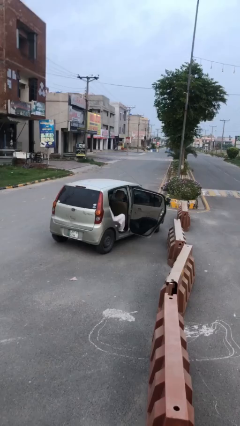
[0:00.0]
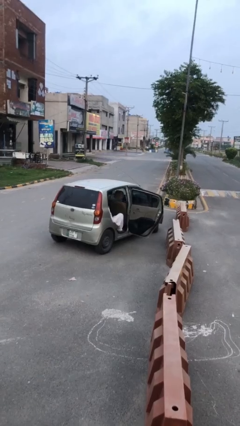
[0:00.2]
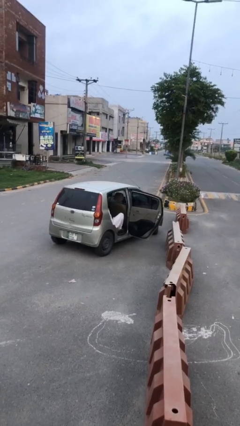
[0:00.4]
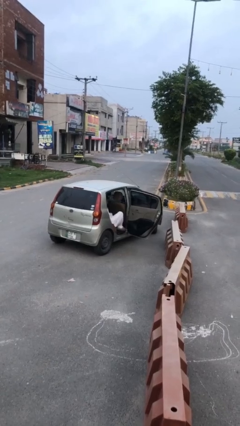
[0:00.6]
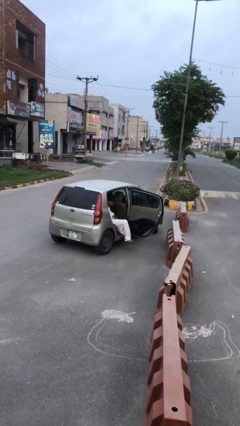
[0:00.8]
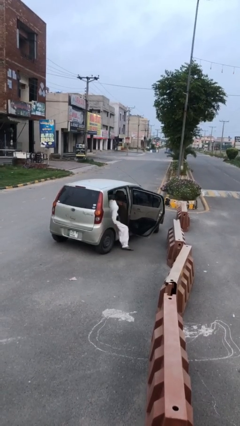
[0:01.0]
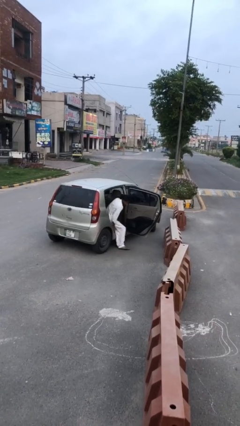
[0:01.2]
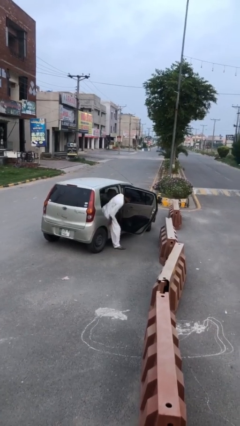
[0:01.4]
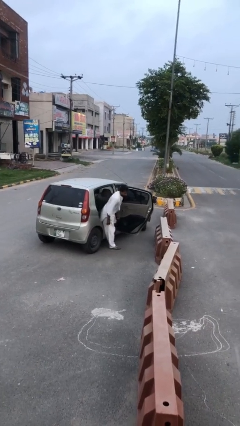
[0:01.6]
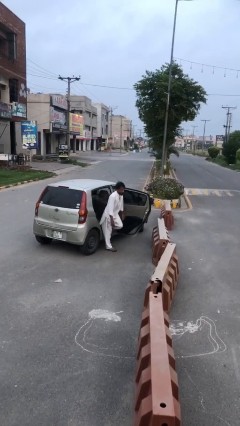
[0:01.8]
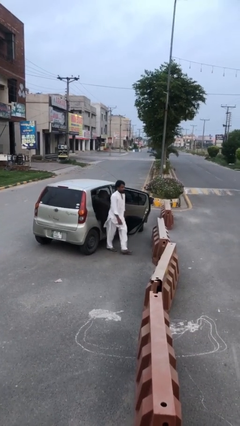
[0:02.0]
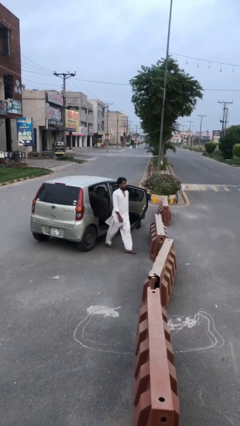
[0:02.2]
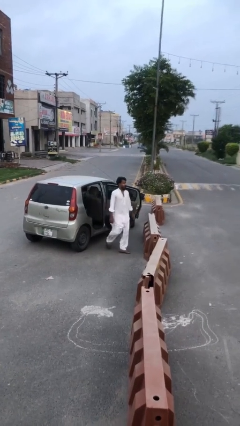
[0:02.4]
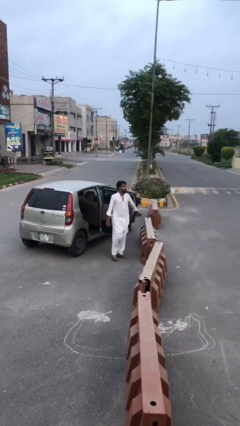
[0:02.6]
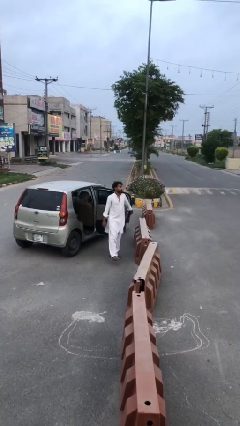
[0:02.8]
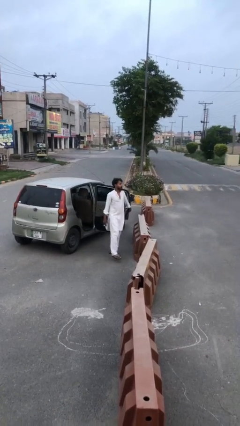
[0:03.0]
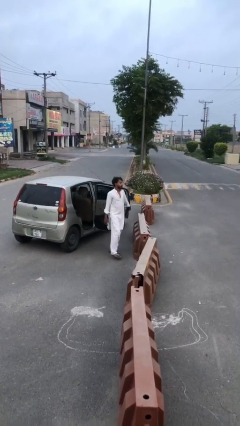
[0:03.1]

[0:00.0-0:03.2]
person exits car

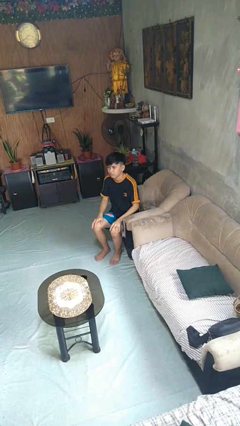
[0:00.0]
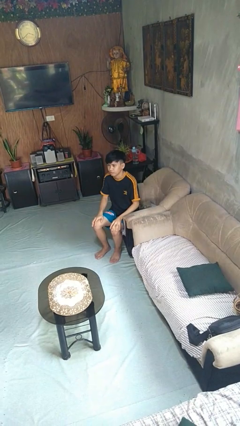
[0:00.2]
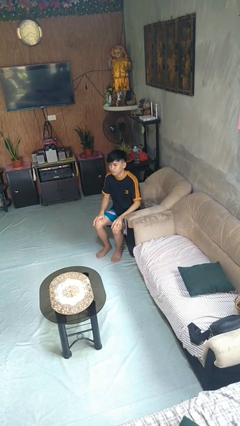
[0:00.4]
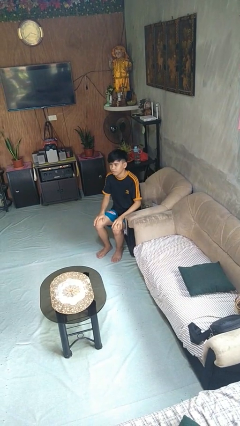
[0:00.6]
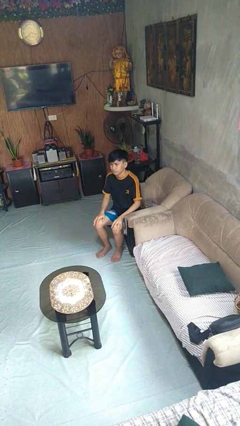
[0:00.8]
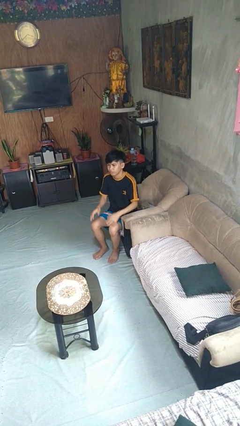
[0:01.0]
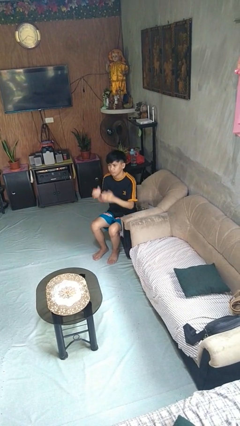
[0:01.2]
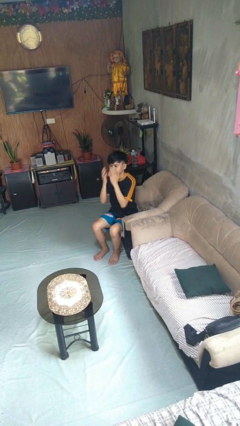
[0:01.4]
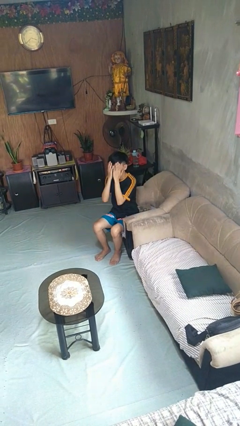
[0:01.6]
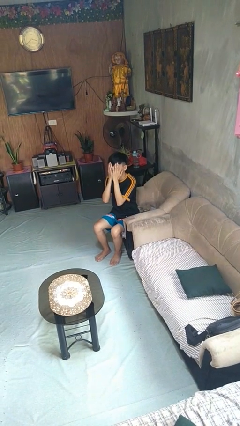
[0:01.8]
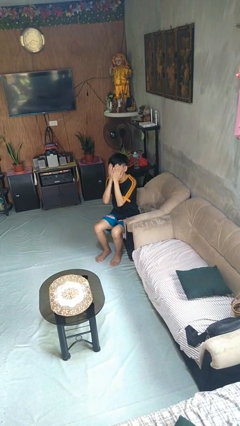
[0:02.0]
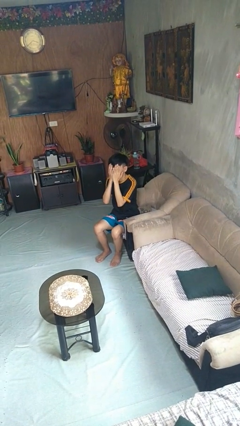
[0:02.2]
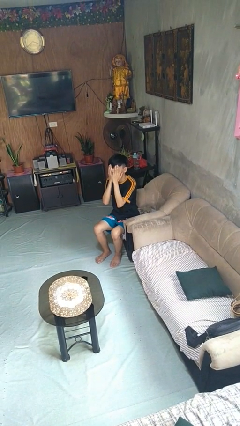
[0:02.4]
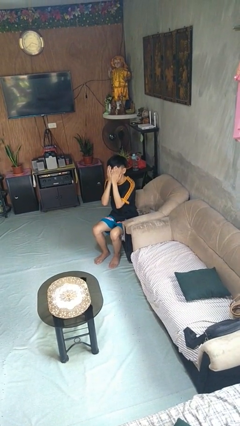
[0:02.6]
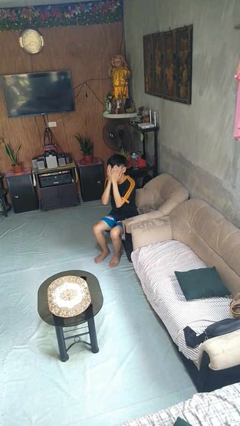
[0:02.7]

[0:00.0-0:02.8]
person covers face with hands

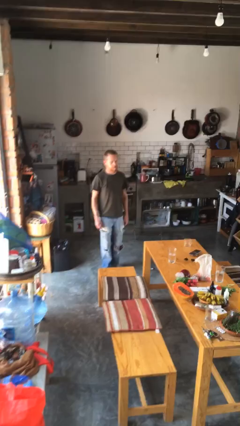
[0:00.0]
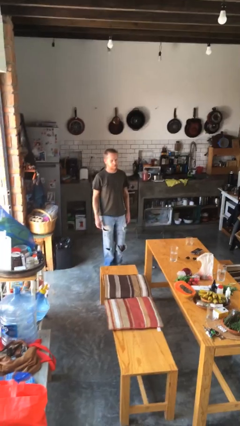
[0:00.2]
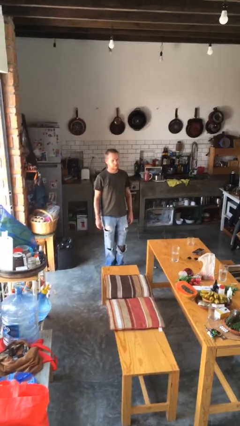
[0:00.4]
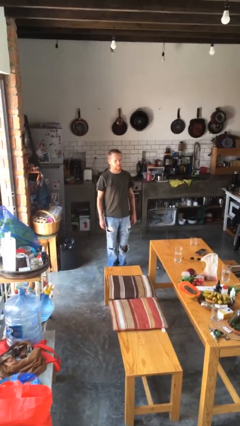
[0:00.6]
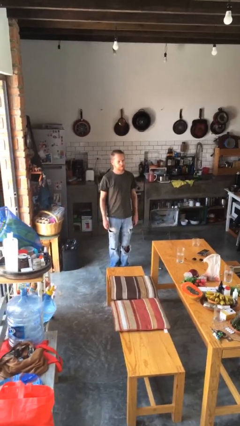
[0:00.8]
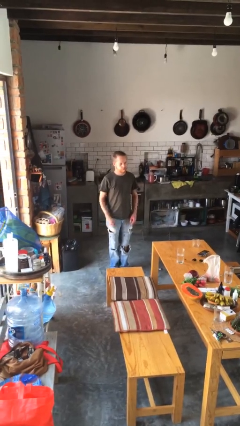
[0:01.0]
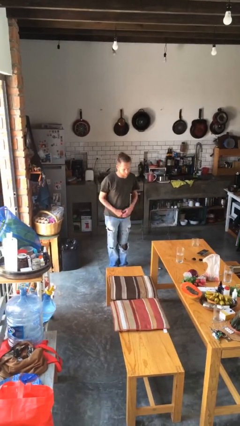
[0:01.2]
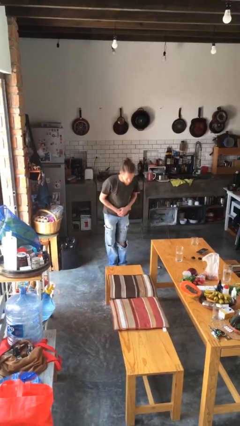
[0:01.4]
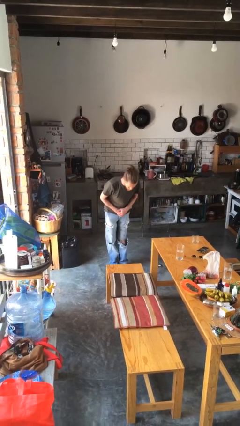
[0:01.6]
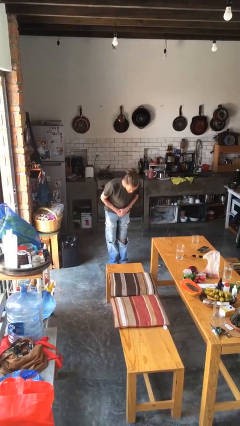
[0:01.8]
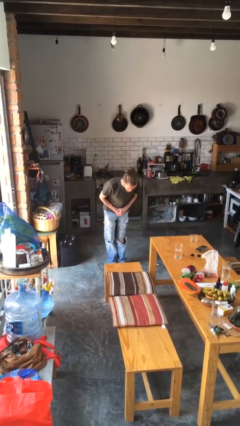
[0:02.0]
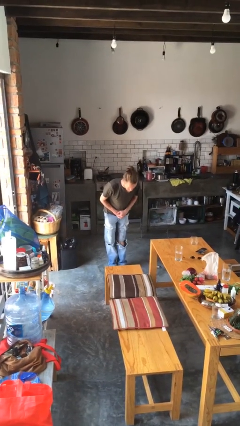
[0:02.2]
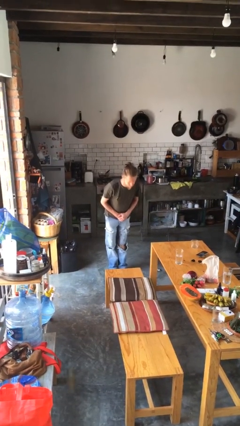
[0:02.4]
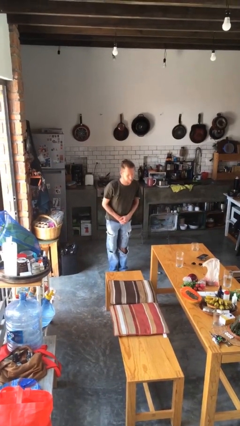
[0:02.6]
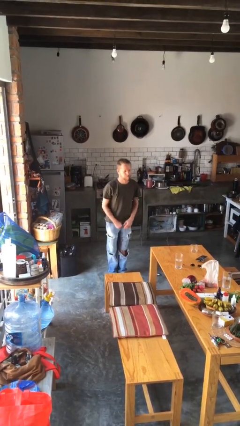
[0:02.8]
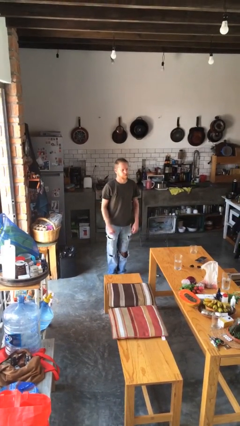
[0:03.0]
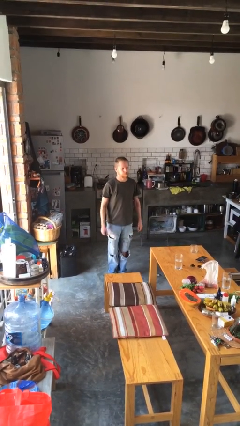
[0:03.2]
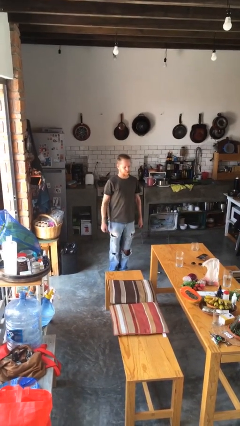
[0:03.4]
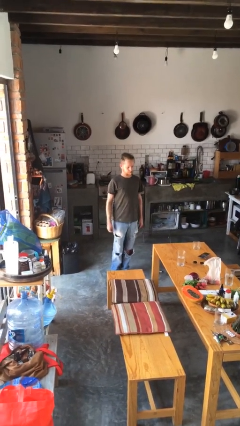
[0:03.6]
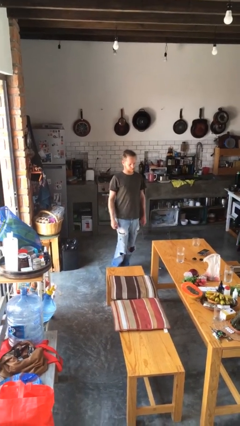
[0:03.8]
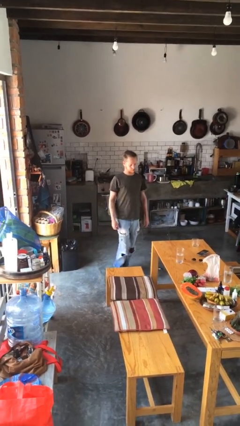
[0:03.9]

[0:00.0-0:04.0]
person bows

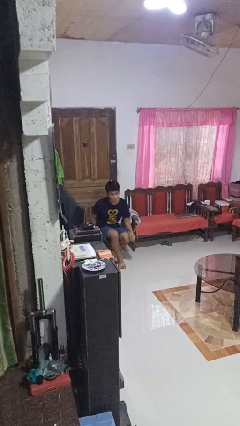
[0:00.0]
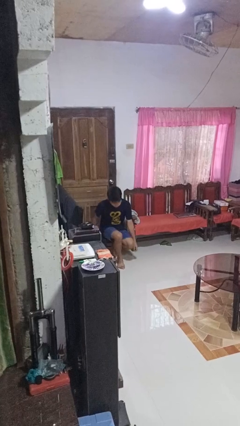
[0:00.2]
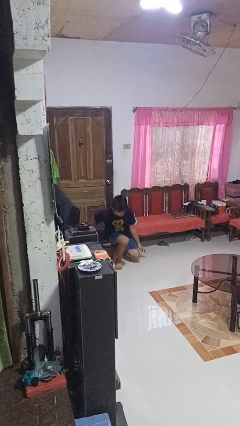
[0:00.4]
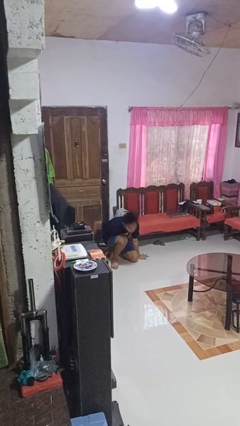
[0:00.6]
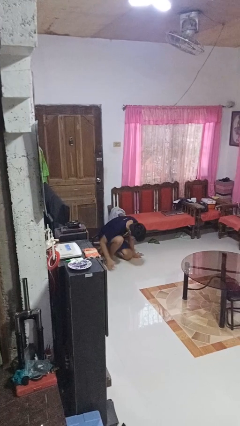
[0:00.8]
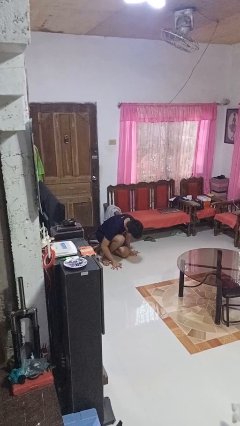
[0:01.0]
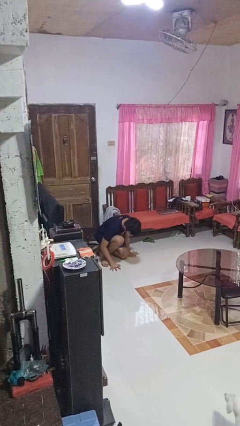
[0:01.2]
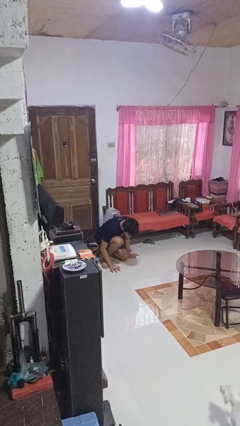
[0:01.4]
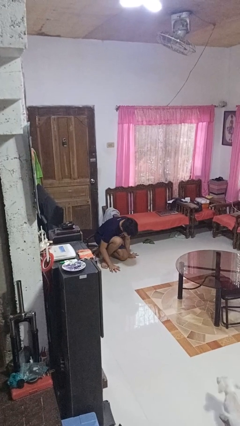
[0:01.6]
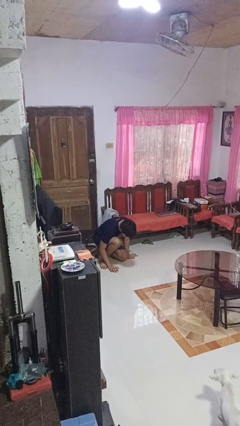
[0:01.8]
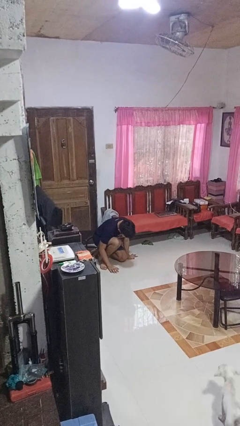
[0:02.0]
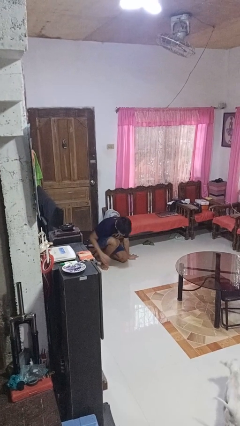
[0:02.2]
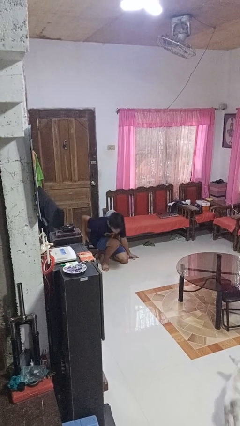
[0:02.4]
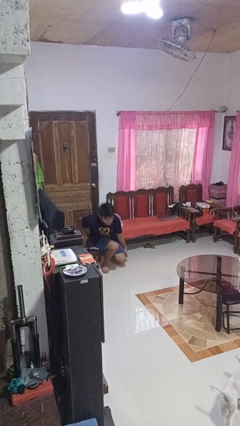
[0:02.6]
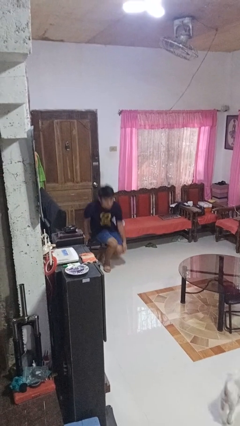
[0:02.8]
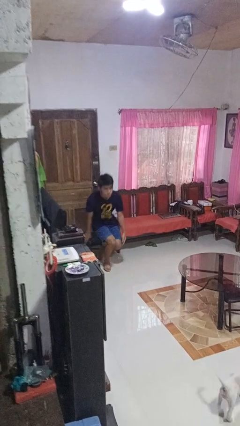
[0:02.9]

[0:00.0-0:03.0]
person falls from chair

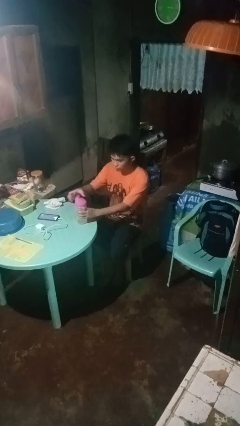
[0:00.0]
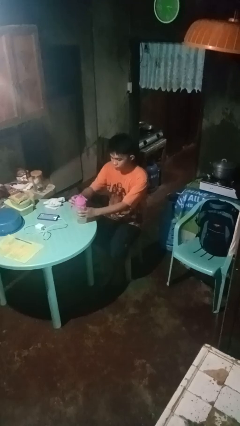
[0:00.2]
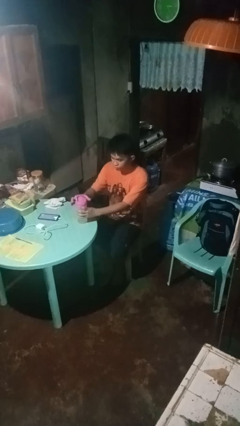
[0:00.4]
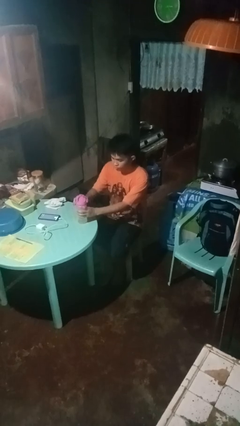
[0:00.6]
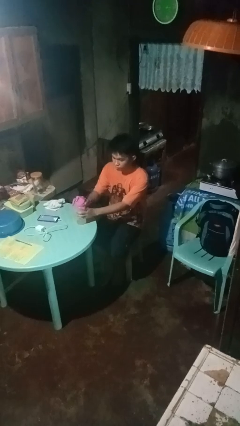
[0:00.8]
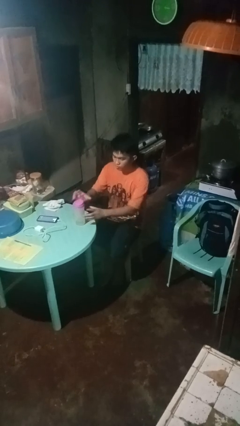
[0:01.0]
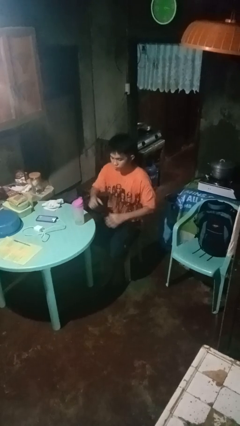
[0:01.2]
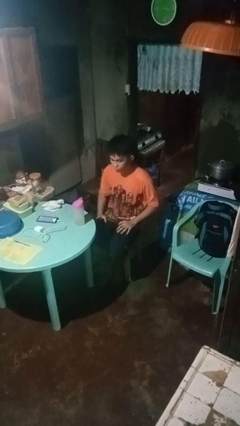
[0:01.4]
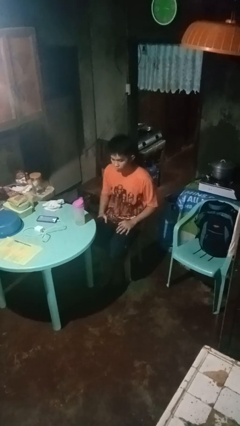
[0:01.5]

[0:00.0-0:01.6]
person screws lid to bottle

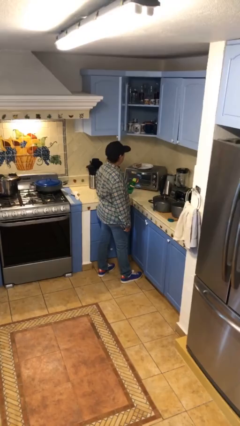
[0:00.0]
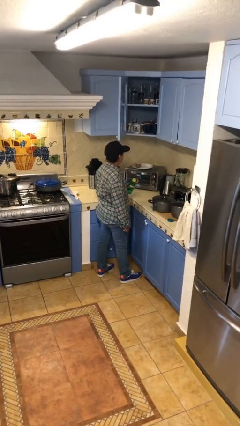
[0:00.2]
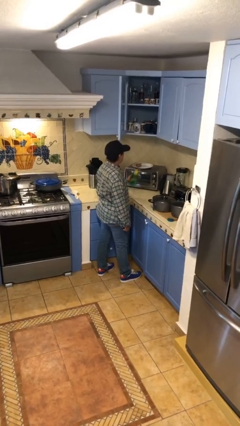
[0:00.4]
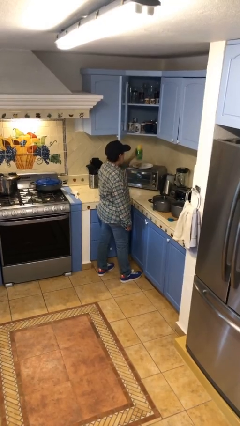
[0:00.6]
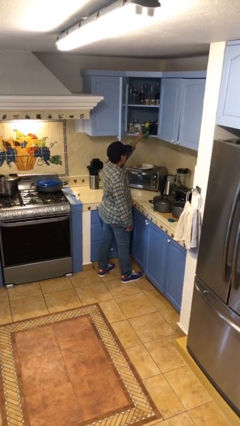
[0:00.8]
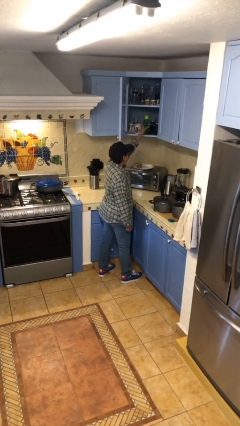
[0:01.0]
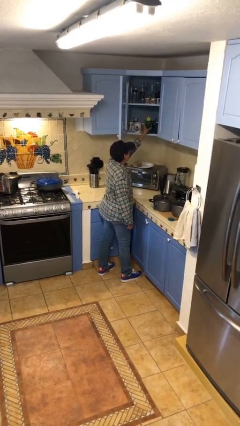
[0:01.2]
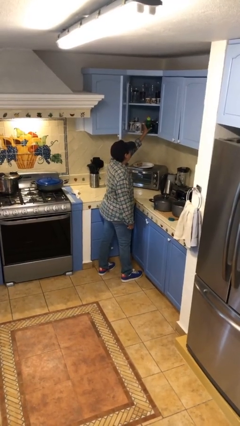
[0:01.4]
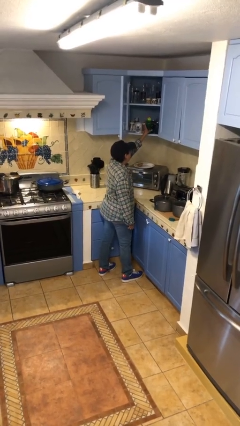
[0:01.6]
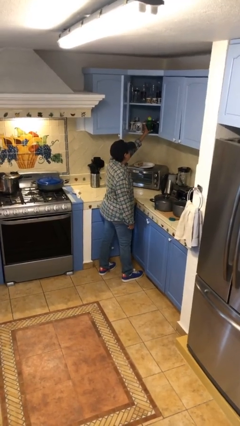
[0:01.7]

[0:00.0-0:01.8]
person puts down object into cabinet

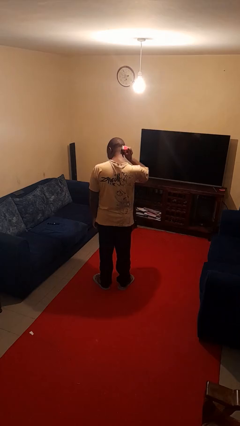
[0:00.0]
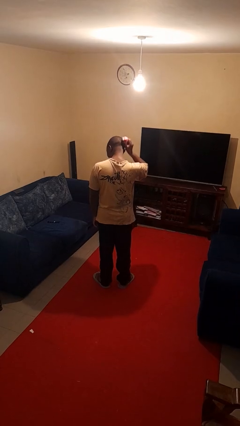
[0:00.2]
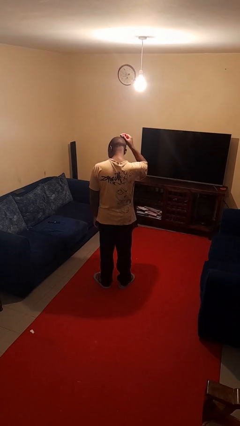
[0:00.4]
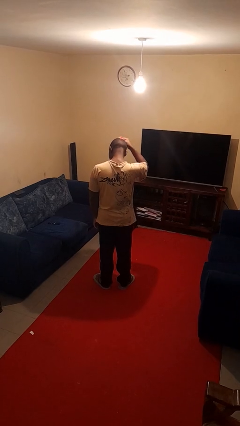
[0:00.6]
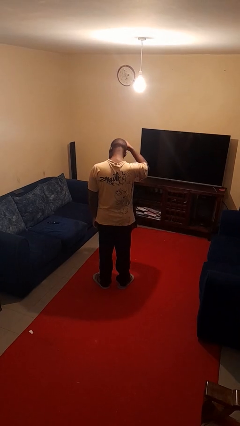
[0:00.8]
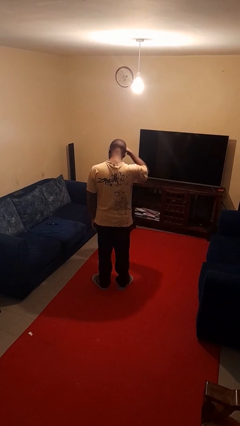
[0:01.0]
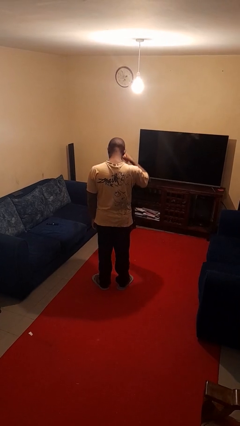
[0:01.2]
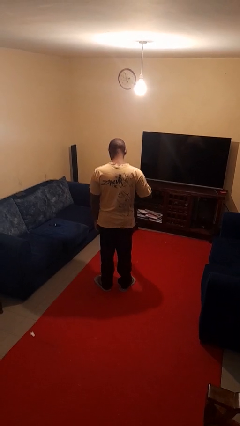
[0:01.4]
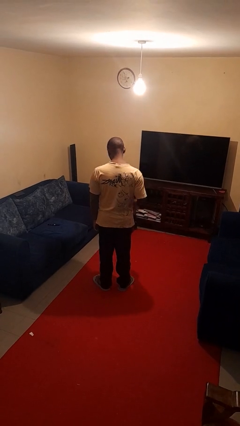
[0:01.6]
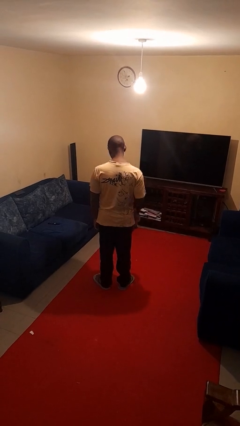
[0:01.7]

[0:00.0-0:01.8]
person brushes hair
